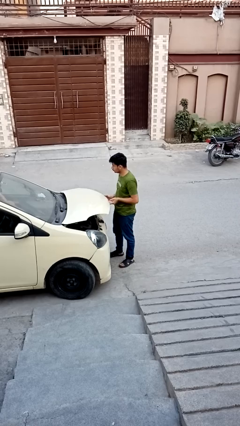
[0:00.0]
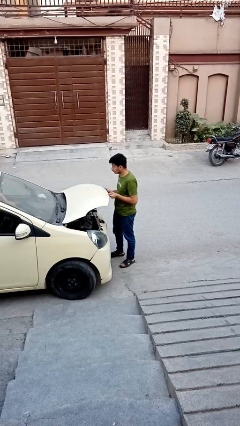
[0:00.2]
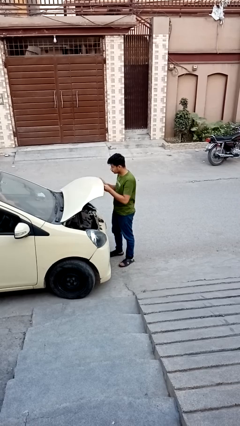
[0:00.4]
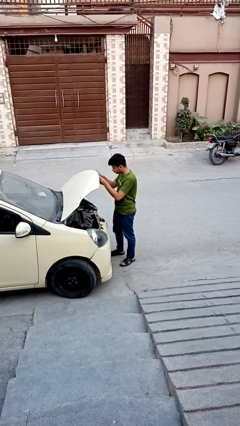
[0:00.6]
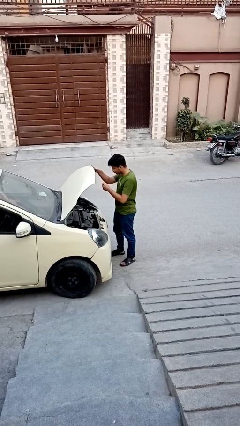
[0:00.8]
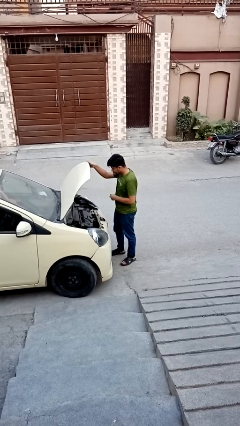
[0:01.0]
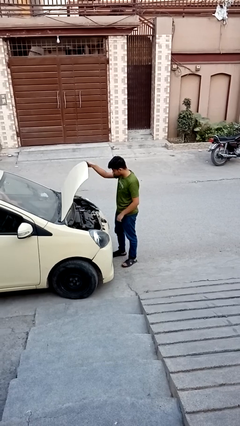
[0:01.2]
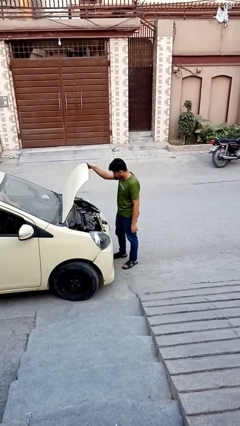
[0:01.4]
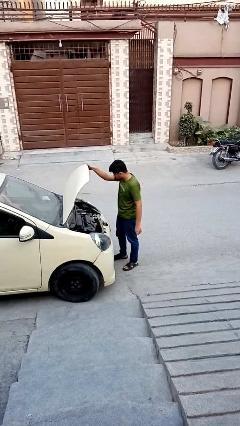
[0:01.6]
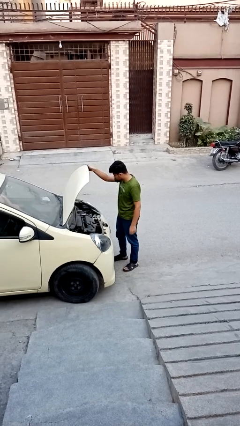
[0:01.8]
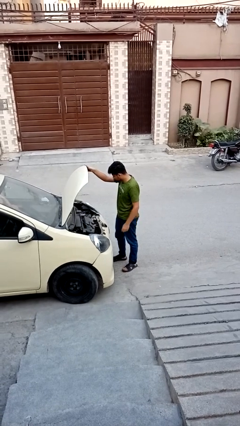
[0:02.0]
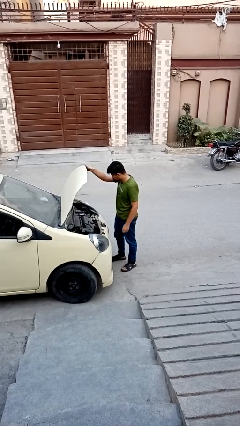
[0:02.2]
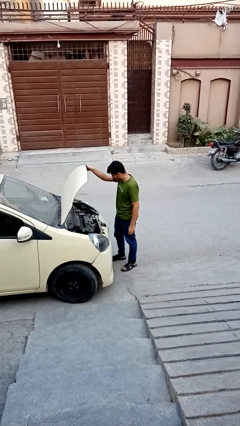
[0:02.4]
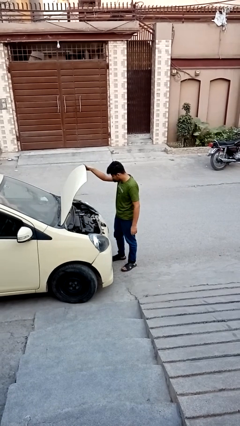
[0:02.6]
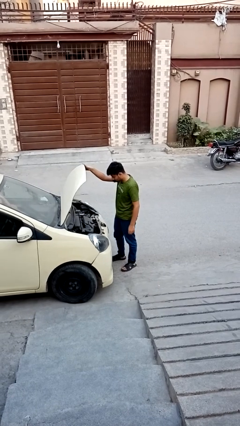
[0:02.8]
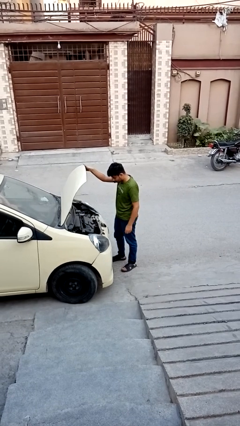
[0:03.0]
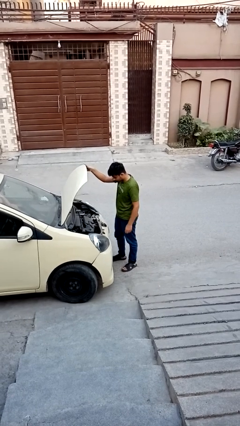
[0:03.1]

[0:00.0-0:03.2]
person opens car hood

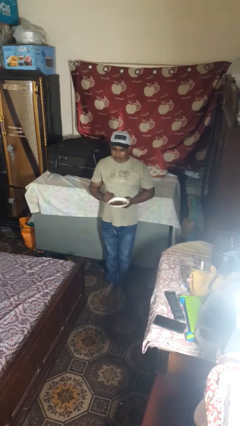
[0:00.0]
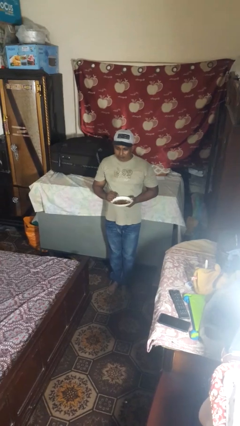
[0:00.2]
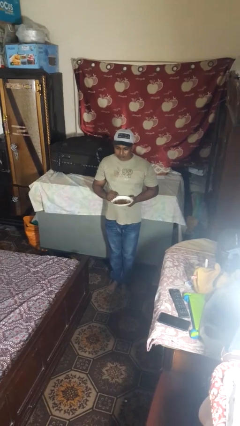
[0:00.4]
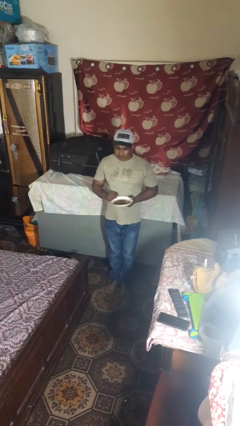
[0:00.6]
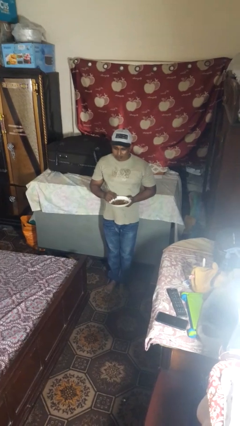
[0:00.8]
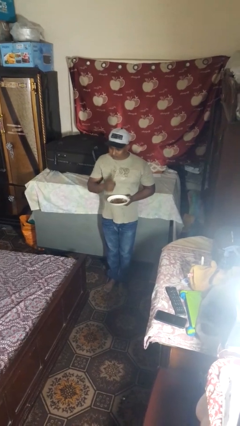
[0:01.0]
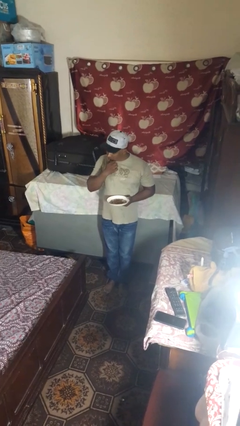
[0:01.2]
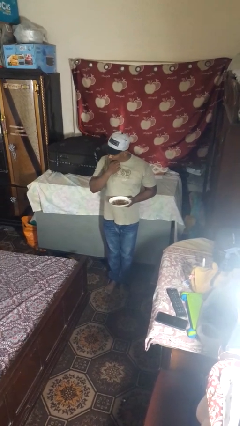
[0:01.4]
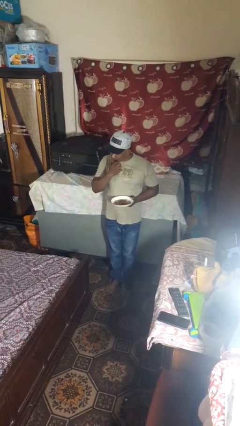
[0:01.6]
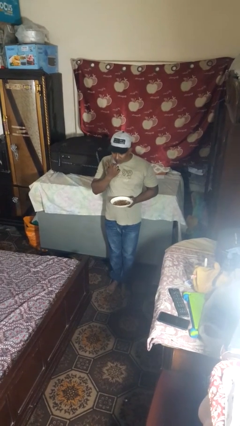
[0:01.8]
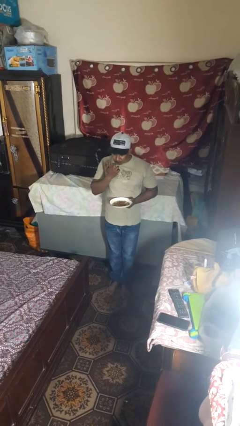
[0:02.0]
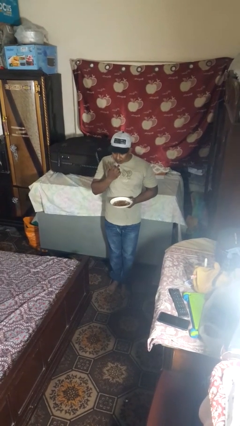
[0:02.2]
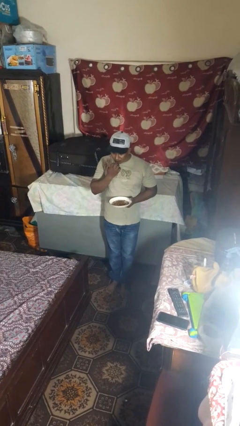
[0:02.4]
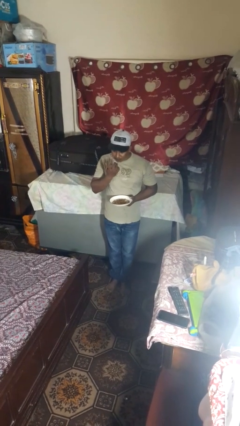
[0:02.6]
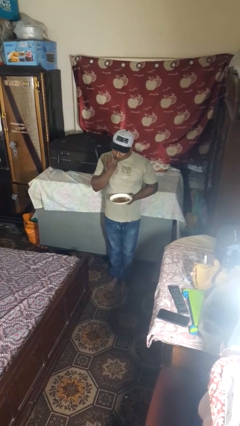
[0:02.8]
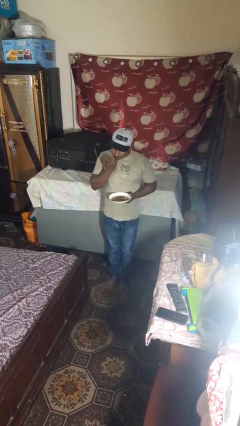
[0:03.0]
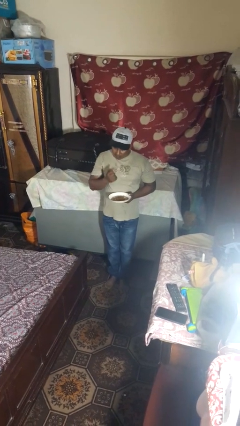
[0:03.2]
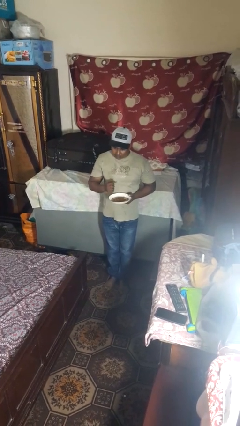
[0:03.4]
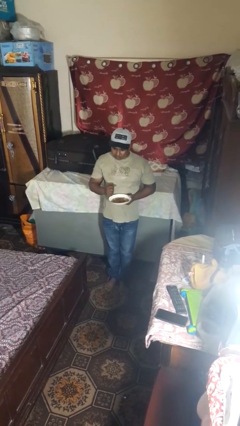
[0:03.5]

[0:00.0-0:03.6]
person licks fingers

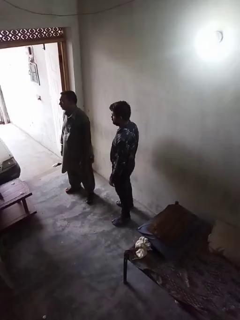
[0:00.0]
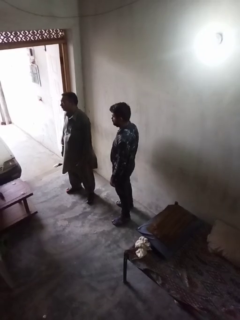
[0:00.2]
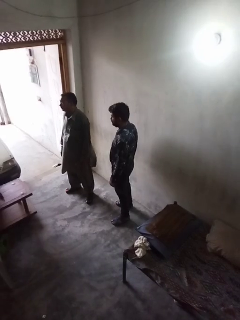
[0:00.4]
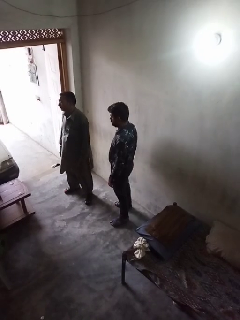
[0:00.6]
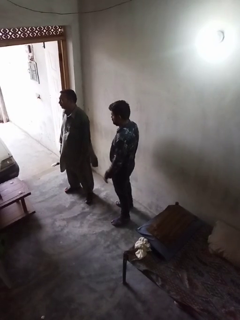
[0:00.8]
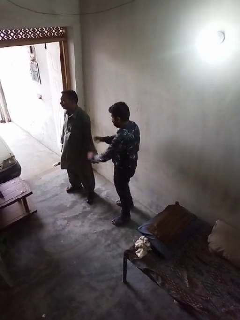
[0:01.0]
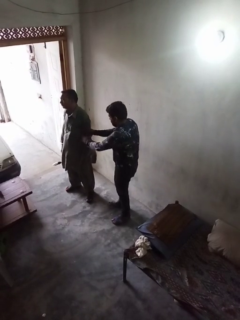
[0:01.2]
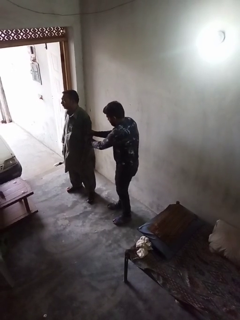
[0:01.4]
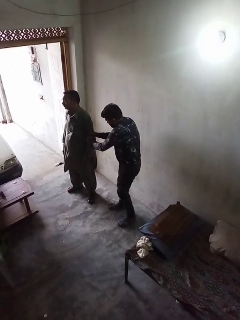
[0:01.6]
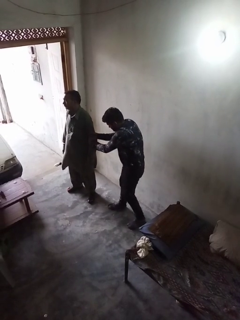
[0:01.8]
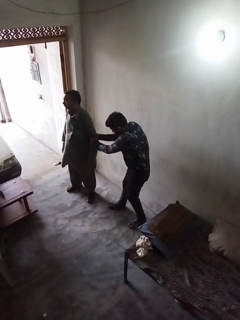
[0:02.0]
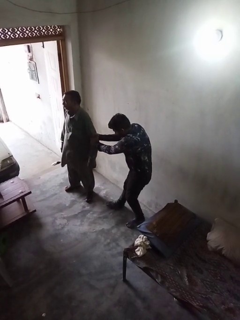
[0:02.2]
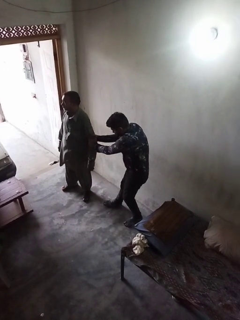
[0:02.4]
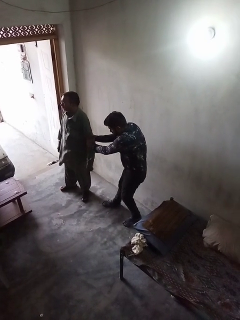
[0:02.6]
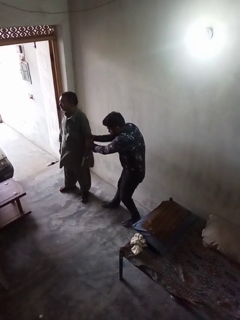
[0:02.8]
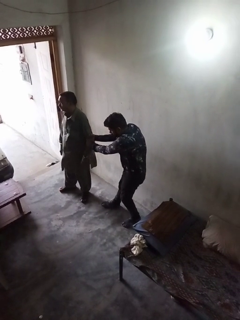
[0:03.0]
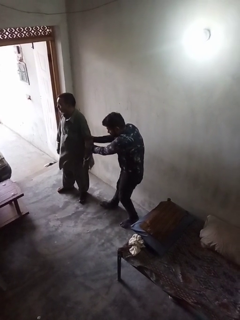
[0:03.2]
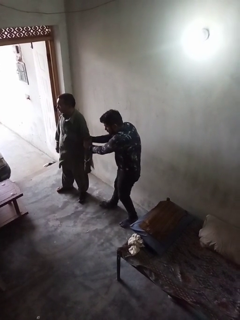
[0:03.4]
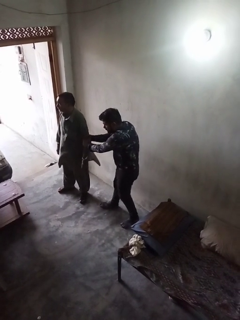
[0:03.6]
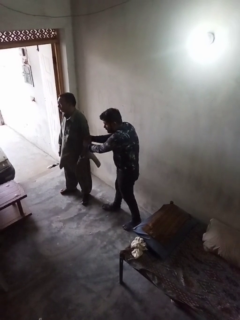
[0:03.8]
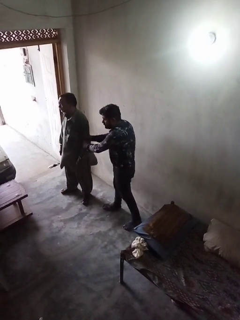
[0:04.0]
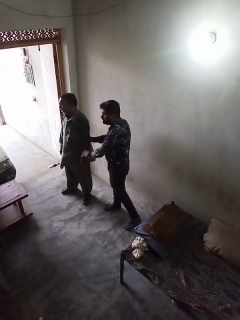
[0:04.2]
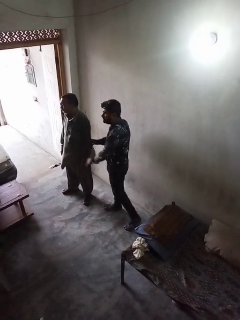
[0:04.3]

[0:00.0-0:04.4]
person grabs person by forearm

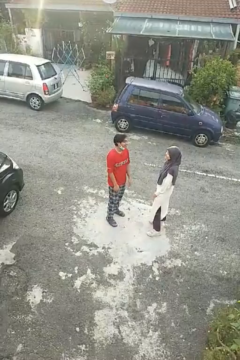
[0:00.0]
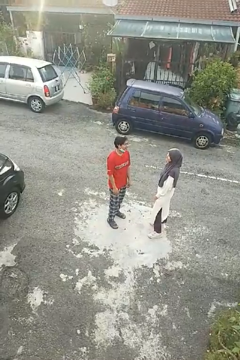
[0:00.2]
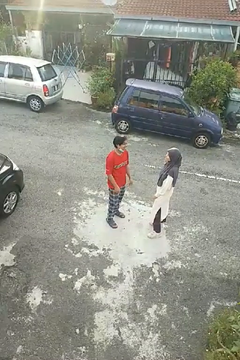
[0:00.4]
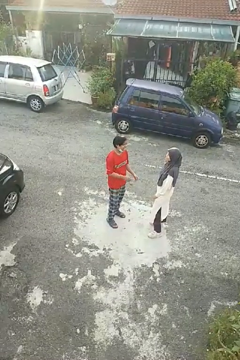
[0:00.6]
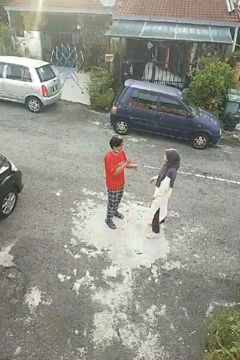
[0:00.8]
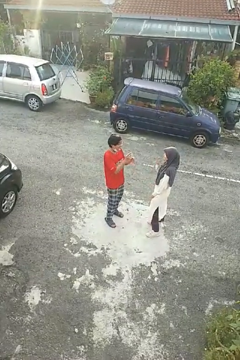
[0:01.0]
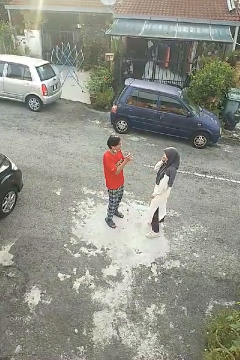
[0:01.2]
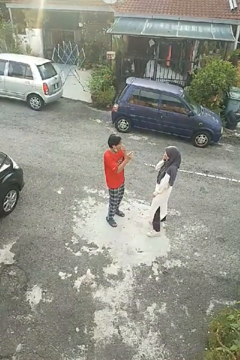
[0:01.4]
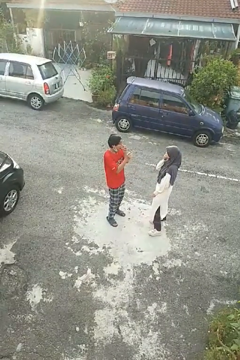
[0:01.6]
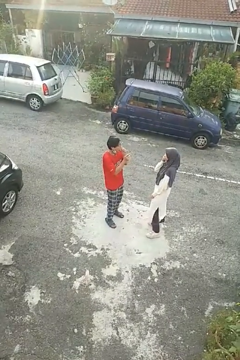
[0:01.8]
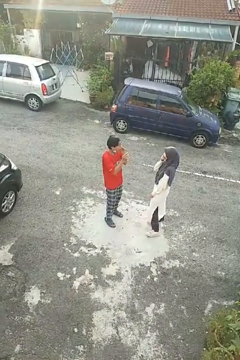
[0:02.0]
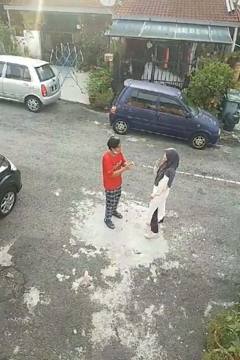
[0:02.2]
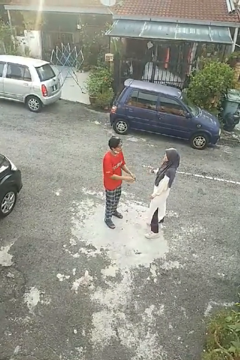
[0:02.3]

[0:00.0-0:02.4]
person laughs with person

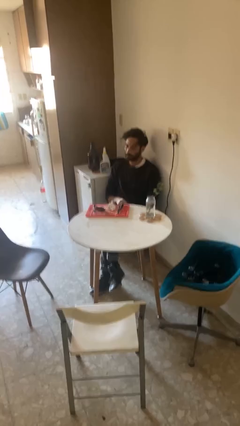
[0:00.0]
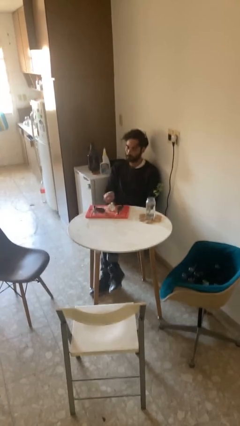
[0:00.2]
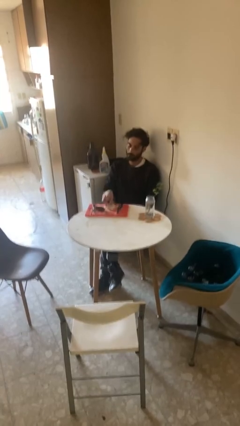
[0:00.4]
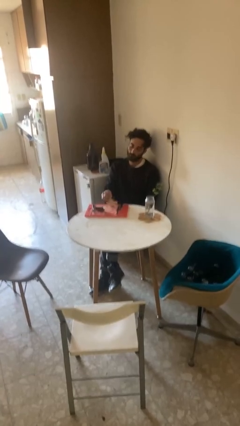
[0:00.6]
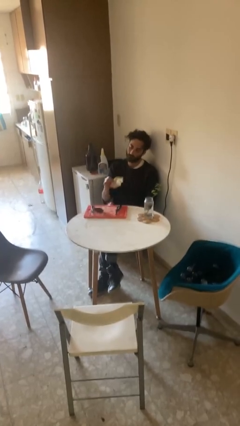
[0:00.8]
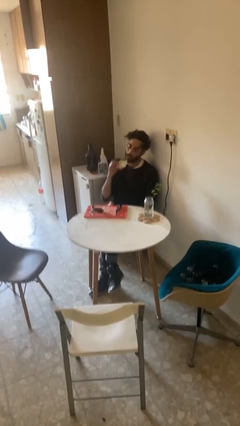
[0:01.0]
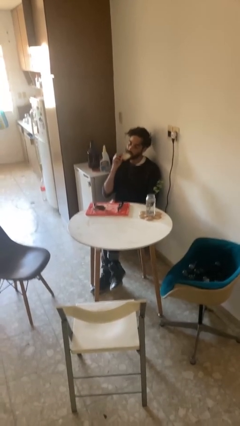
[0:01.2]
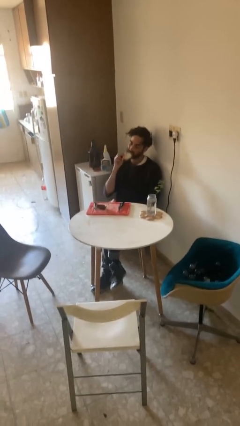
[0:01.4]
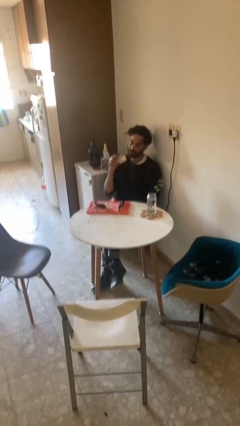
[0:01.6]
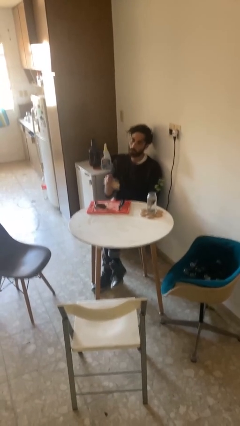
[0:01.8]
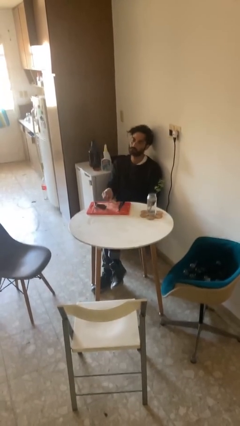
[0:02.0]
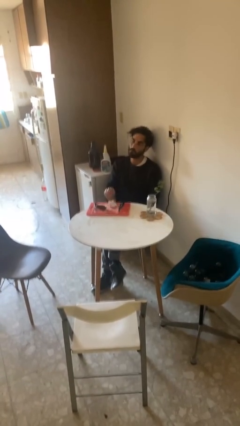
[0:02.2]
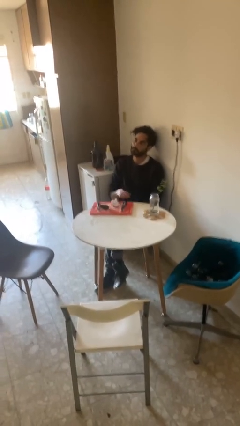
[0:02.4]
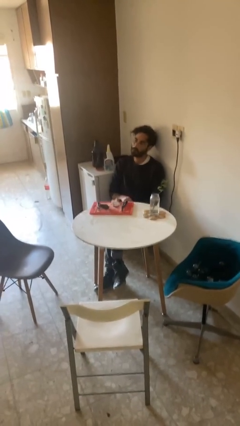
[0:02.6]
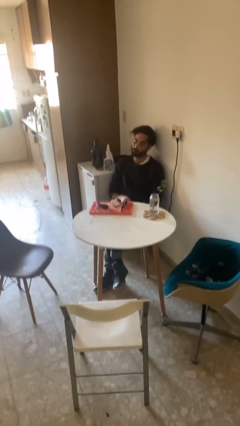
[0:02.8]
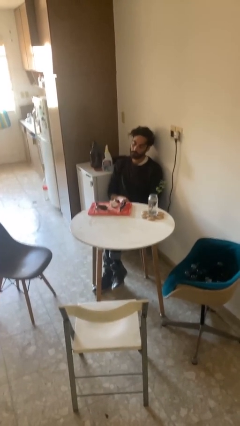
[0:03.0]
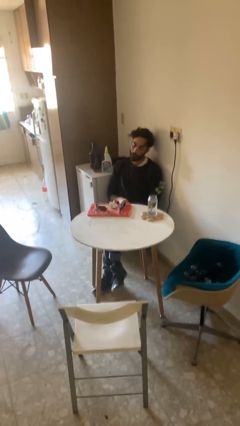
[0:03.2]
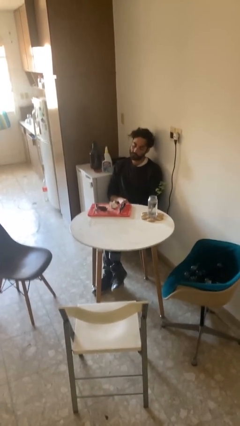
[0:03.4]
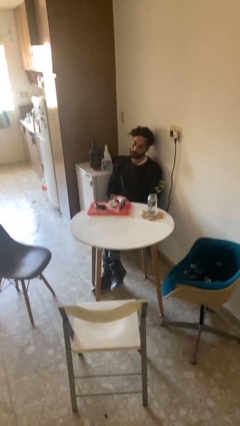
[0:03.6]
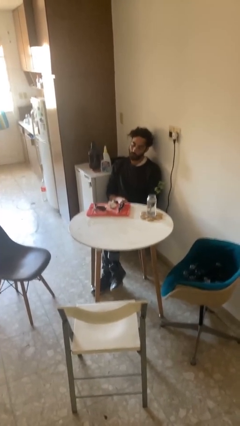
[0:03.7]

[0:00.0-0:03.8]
person eats with hands

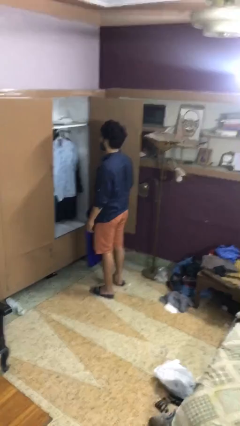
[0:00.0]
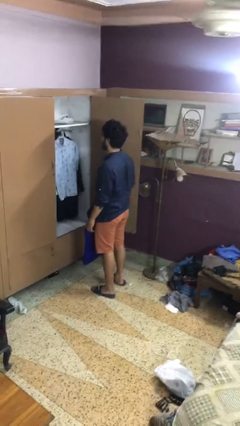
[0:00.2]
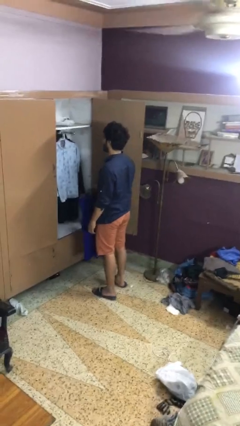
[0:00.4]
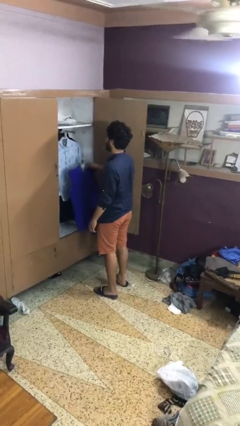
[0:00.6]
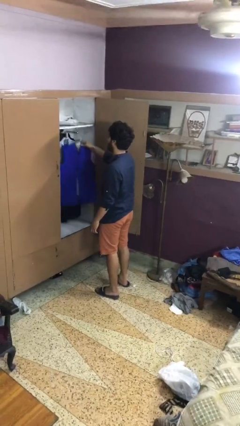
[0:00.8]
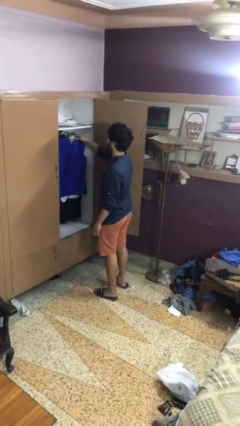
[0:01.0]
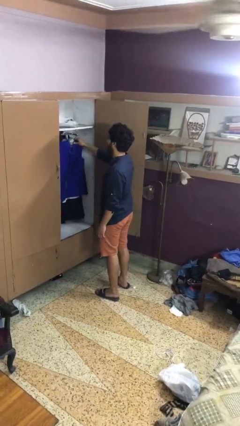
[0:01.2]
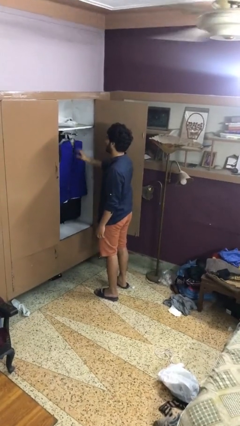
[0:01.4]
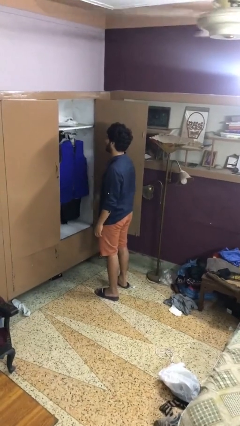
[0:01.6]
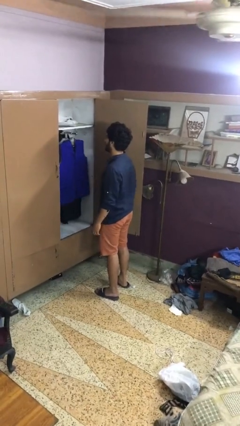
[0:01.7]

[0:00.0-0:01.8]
person puts clothes into closet
